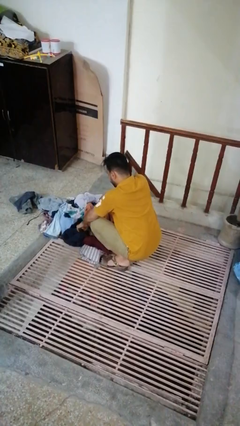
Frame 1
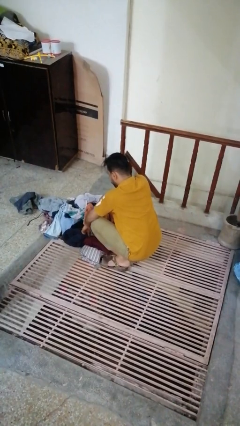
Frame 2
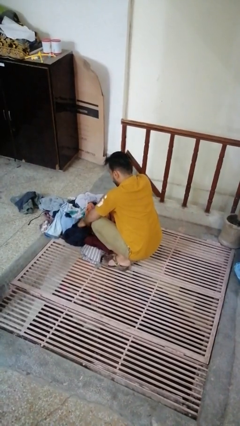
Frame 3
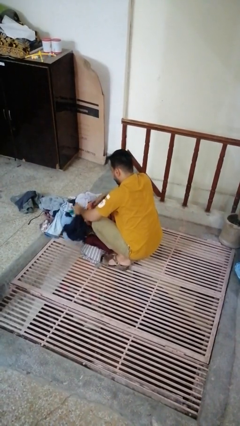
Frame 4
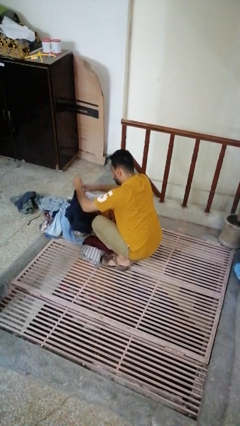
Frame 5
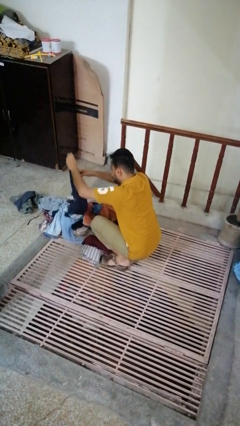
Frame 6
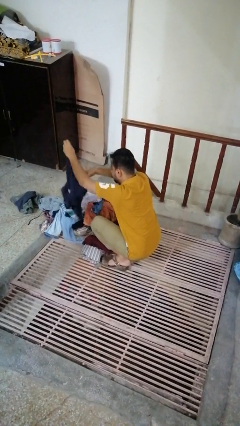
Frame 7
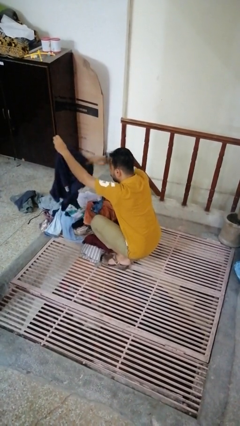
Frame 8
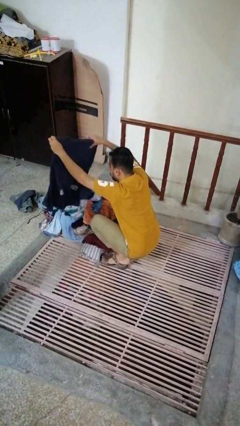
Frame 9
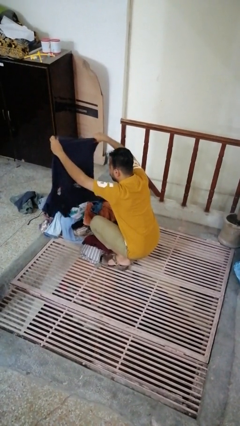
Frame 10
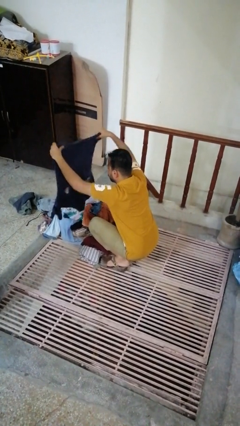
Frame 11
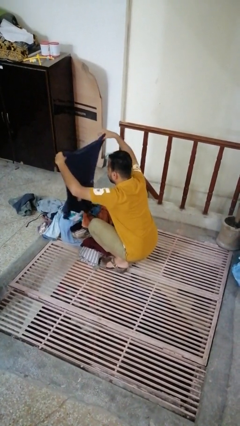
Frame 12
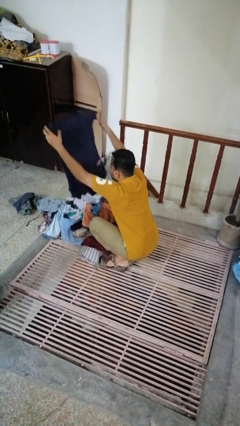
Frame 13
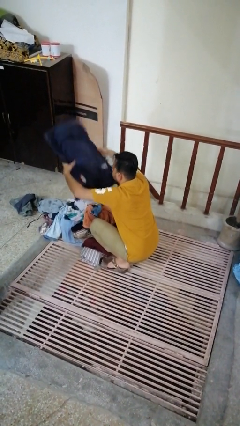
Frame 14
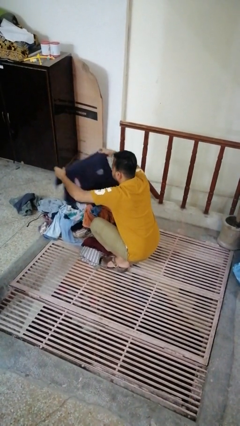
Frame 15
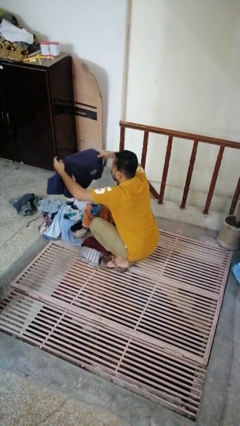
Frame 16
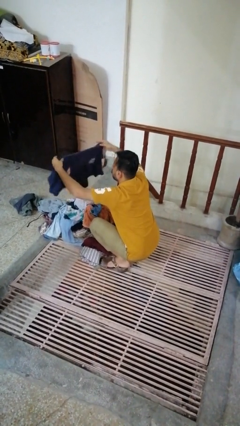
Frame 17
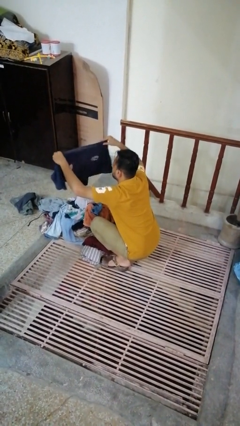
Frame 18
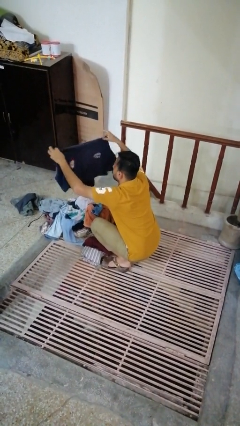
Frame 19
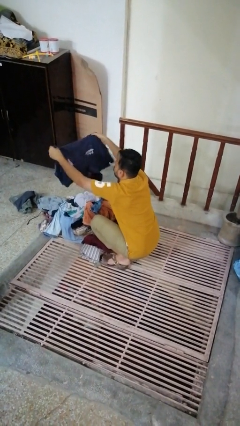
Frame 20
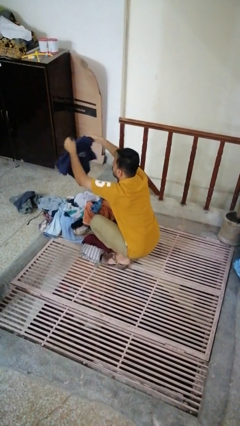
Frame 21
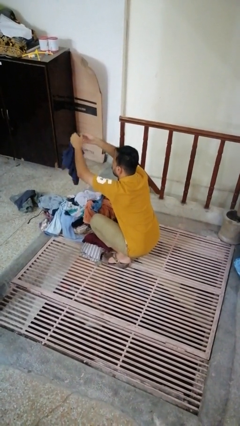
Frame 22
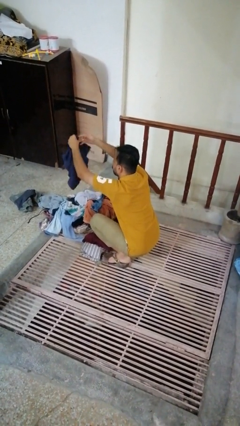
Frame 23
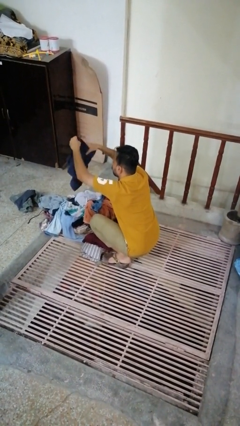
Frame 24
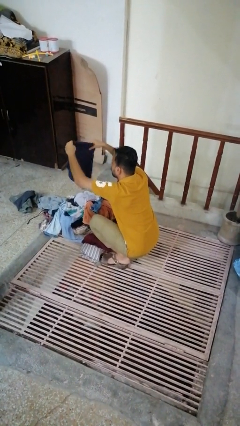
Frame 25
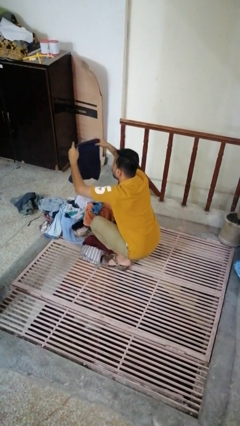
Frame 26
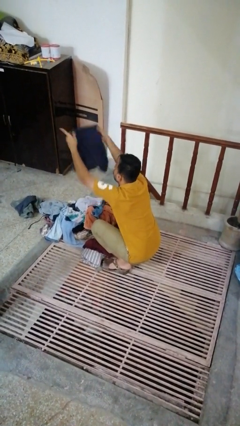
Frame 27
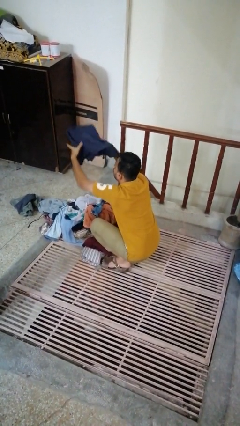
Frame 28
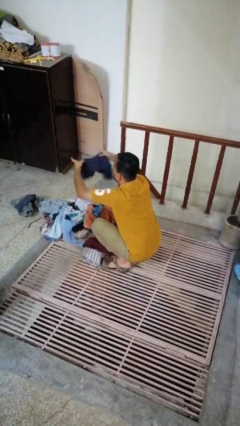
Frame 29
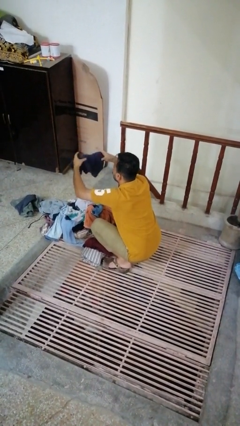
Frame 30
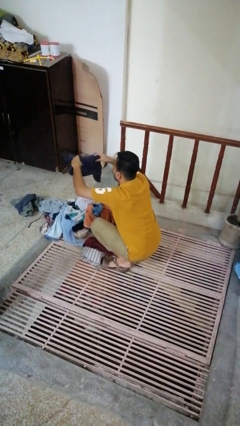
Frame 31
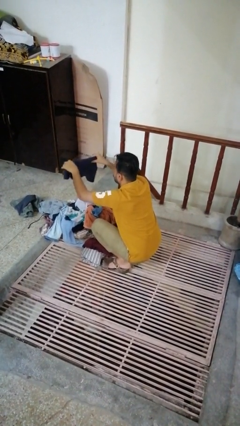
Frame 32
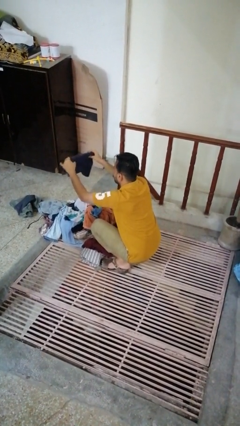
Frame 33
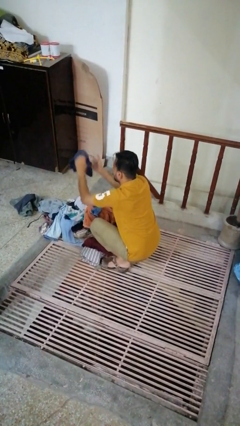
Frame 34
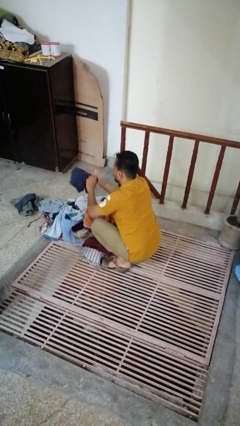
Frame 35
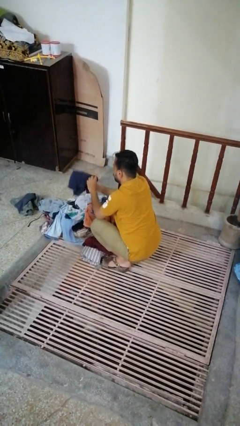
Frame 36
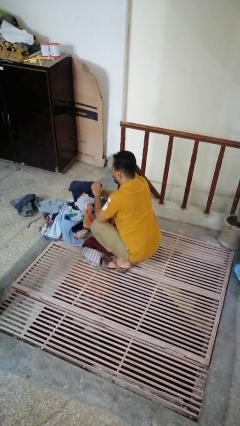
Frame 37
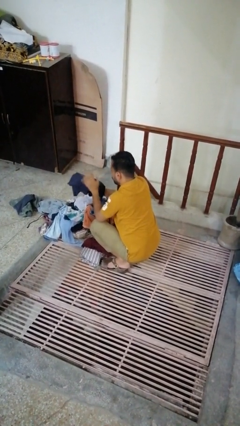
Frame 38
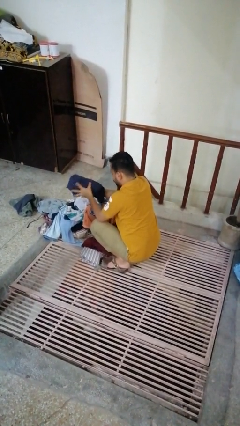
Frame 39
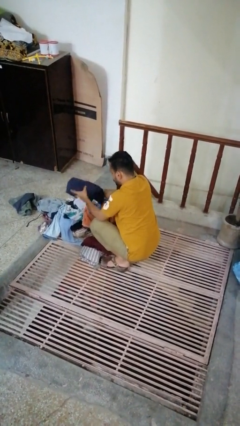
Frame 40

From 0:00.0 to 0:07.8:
person folds shirt

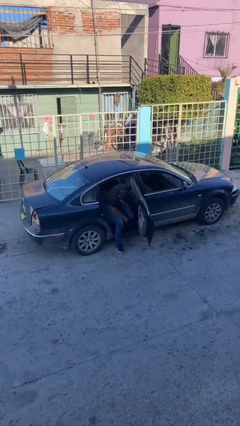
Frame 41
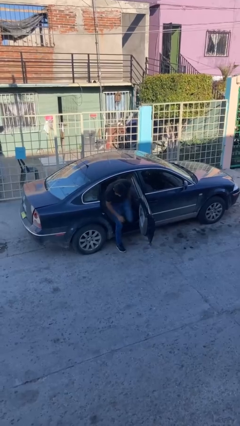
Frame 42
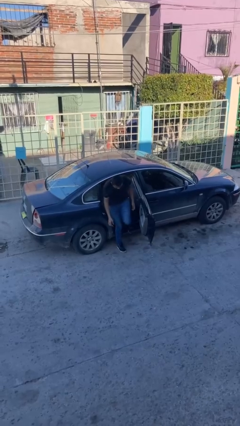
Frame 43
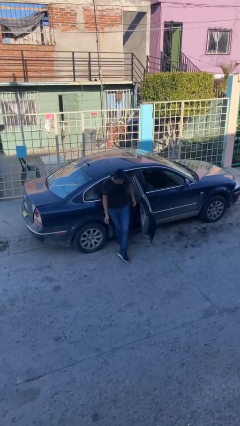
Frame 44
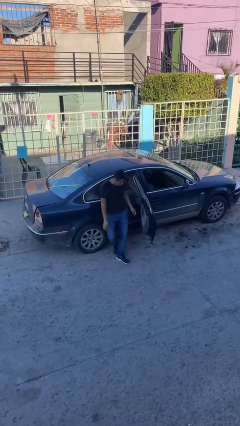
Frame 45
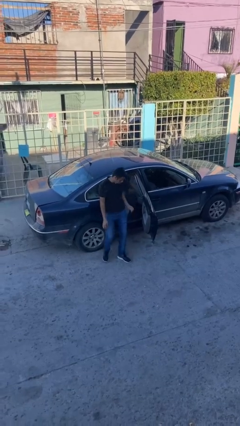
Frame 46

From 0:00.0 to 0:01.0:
person exits car

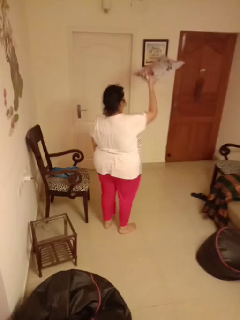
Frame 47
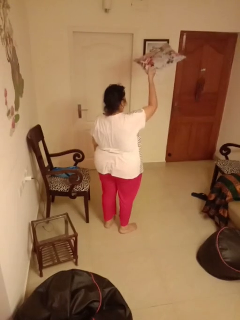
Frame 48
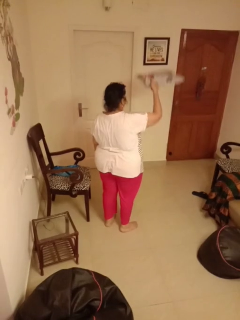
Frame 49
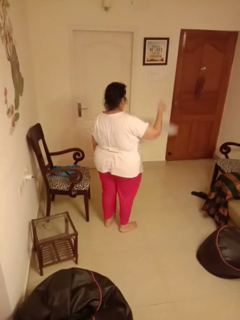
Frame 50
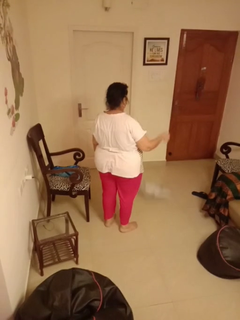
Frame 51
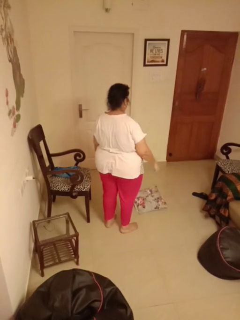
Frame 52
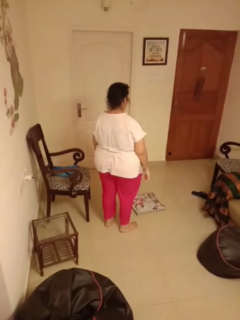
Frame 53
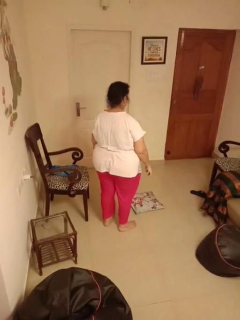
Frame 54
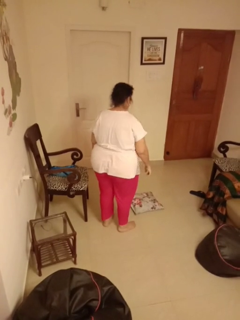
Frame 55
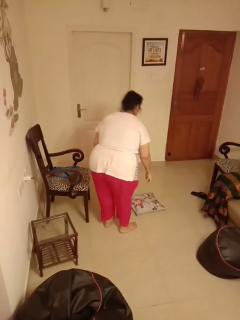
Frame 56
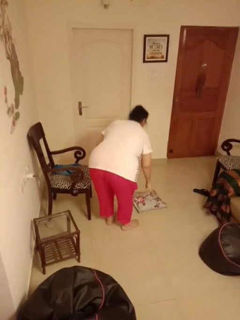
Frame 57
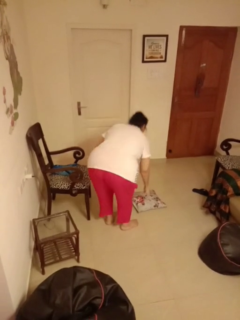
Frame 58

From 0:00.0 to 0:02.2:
person throws object into air

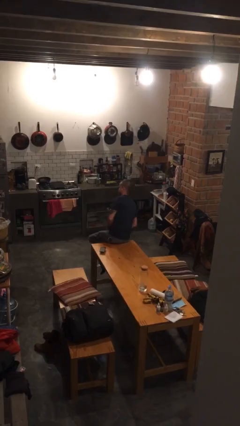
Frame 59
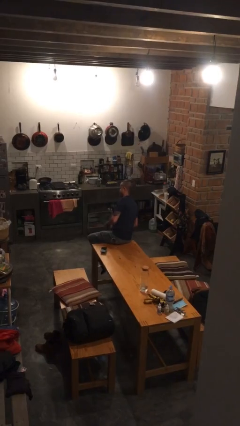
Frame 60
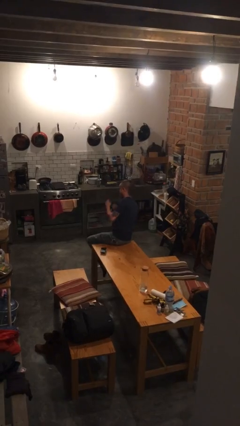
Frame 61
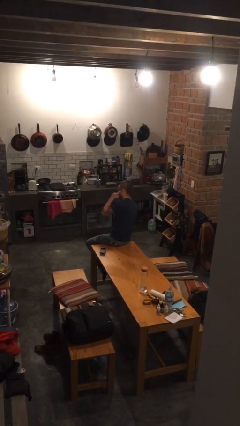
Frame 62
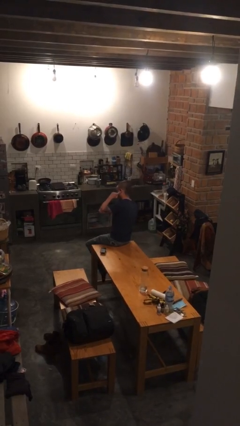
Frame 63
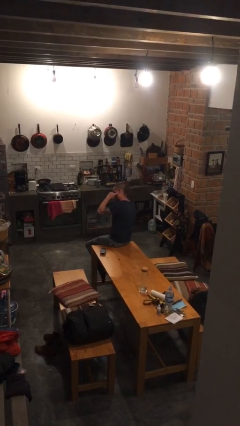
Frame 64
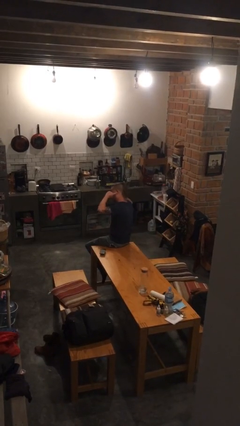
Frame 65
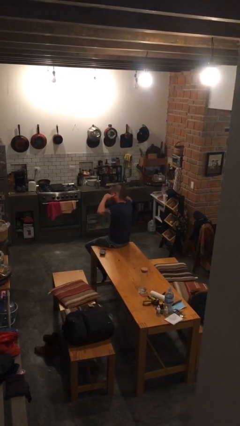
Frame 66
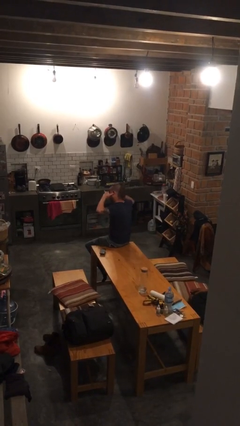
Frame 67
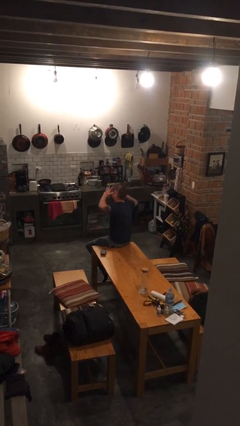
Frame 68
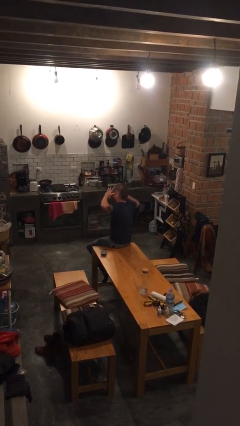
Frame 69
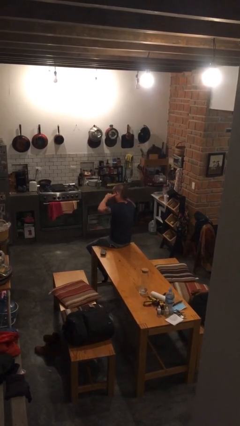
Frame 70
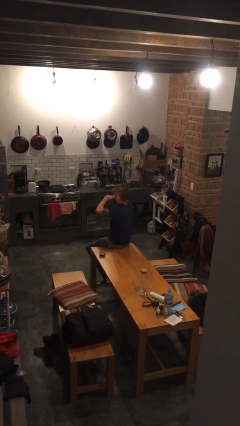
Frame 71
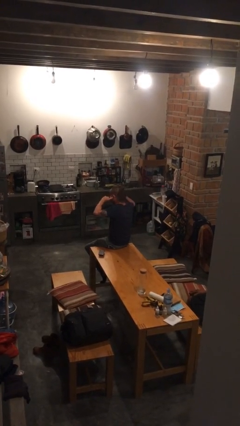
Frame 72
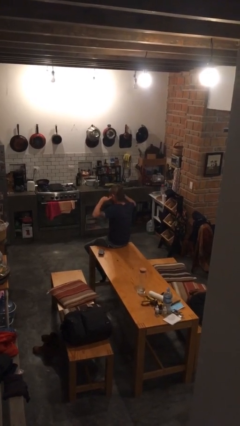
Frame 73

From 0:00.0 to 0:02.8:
person puts fingers in ear

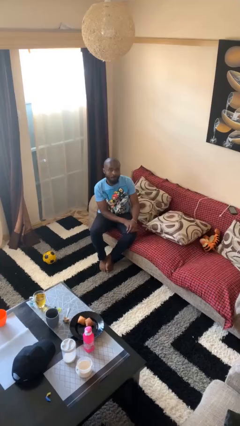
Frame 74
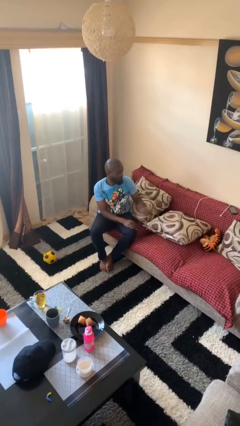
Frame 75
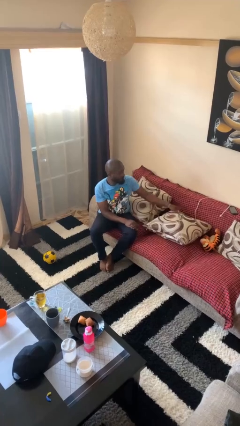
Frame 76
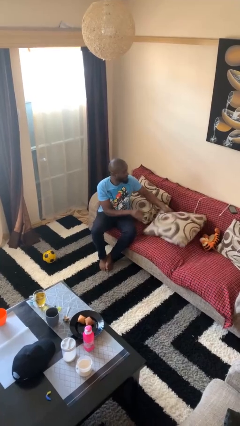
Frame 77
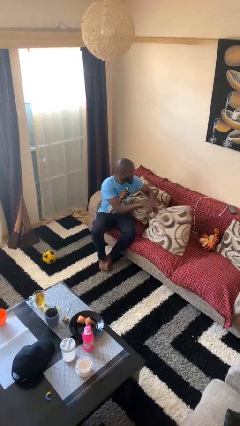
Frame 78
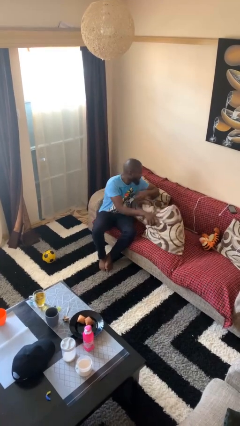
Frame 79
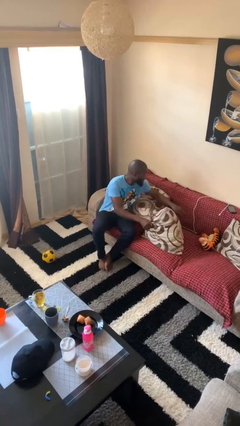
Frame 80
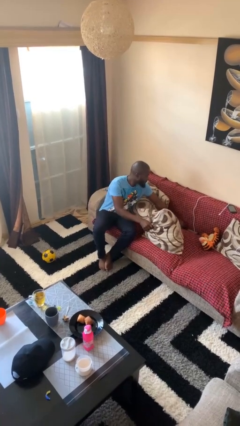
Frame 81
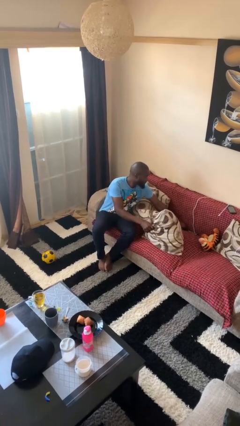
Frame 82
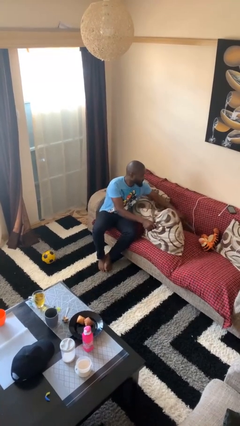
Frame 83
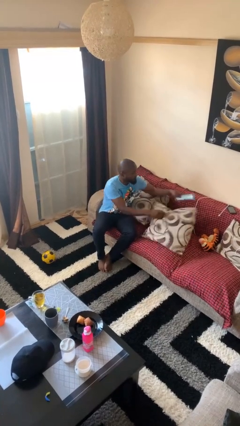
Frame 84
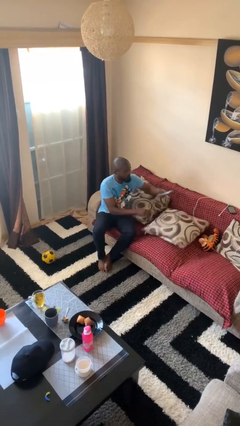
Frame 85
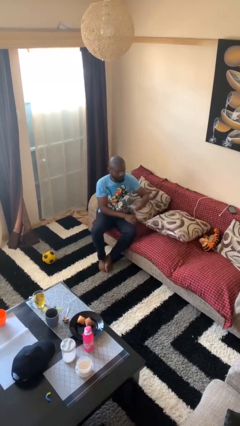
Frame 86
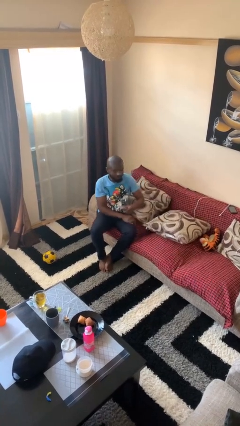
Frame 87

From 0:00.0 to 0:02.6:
person searches in couch

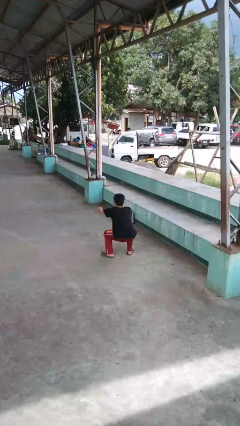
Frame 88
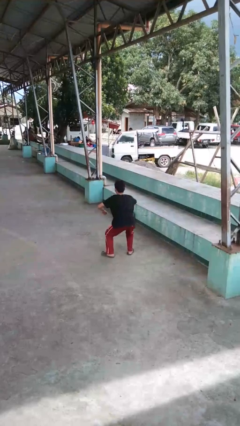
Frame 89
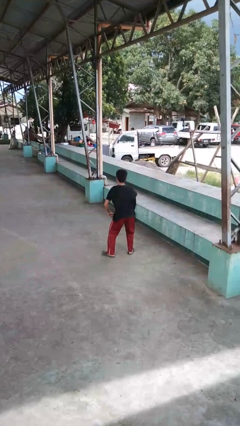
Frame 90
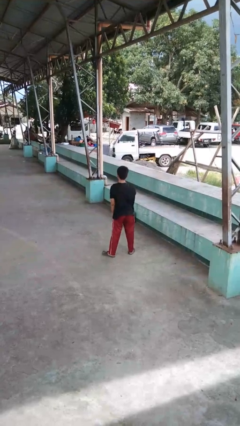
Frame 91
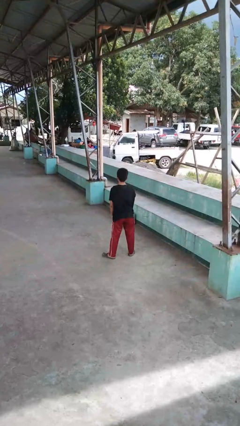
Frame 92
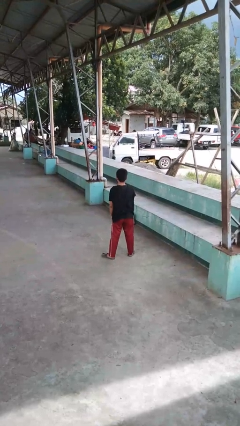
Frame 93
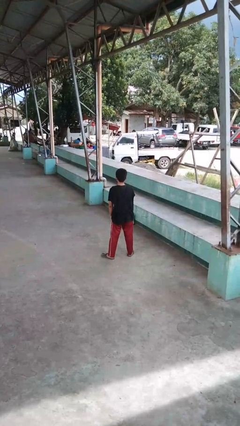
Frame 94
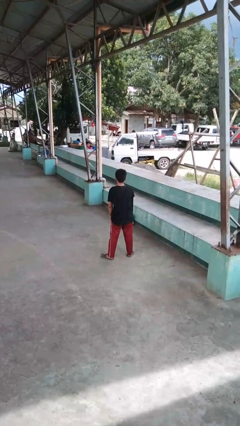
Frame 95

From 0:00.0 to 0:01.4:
person stands up
